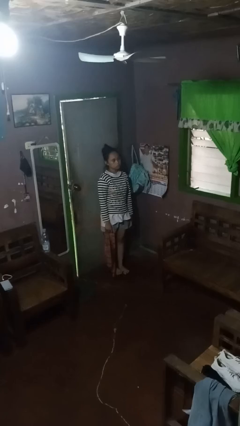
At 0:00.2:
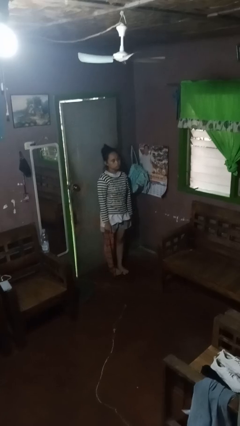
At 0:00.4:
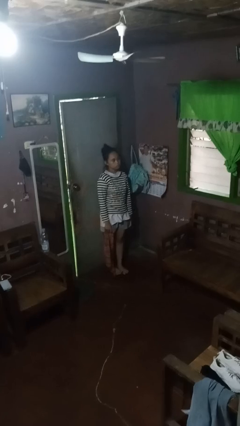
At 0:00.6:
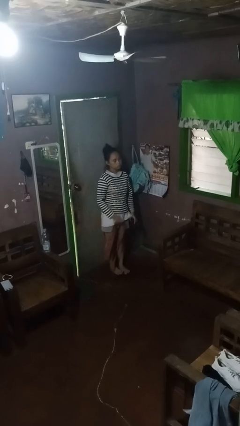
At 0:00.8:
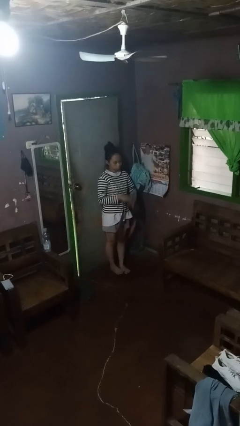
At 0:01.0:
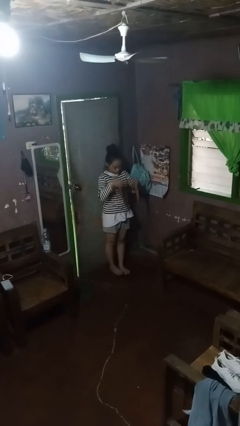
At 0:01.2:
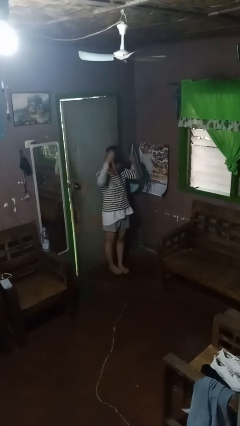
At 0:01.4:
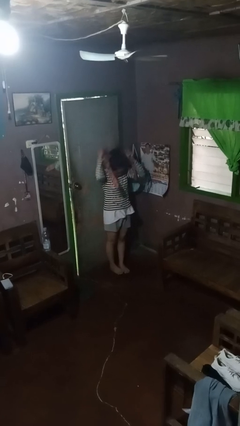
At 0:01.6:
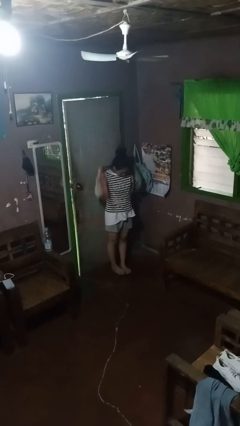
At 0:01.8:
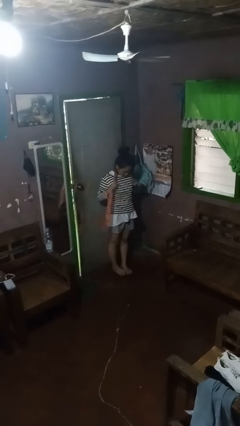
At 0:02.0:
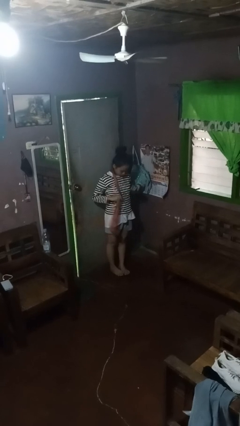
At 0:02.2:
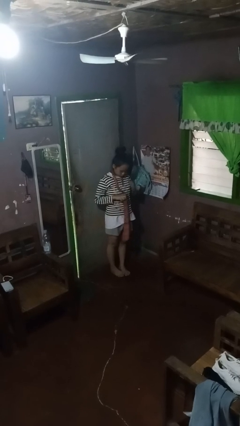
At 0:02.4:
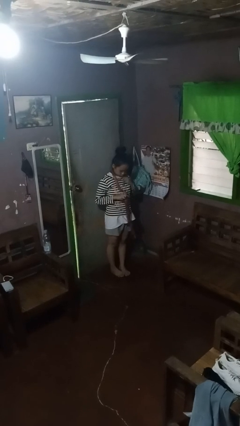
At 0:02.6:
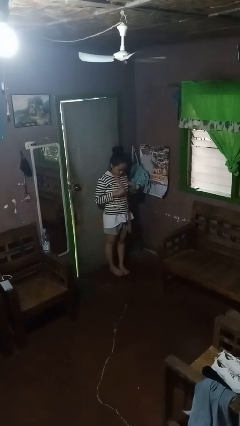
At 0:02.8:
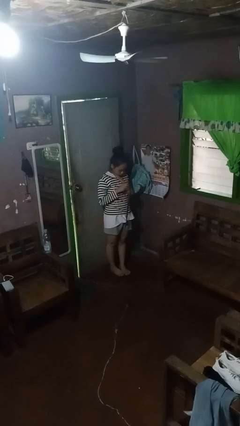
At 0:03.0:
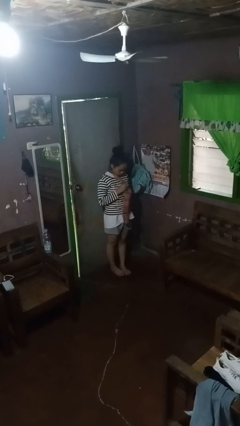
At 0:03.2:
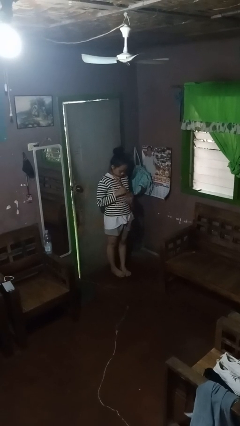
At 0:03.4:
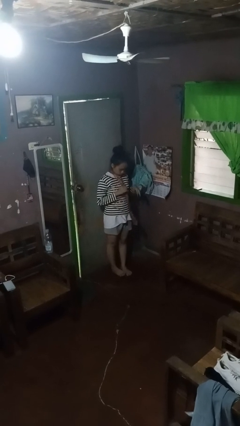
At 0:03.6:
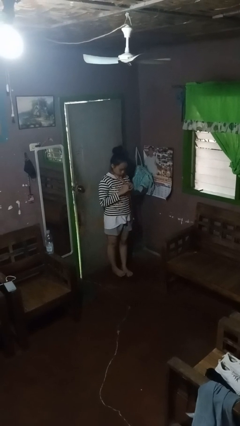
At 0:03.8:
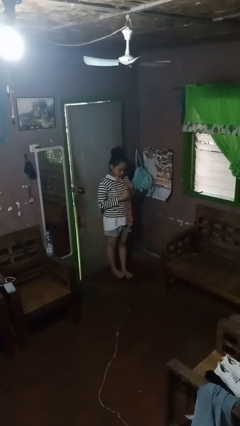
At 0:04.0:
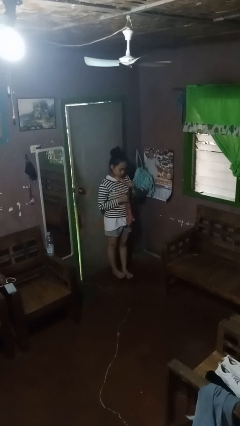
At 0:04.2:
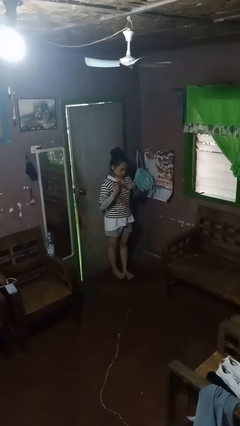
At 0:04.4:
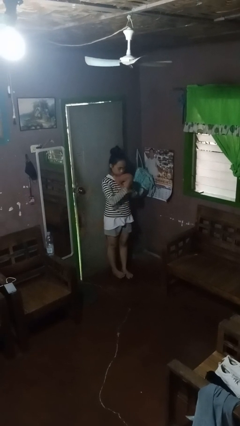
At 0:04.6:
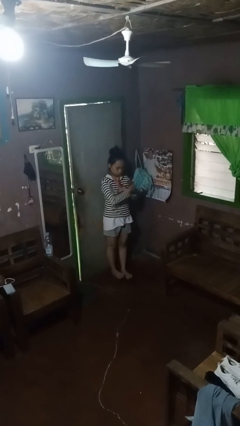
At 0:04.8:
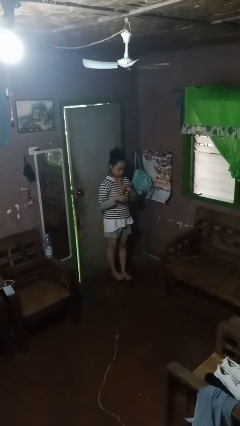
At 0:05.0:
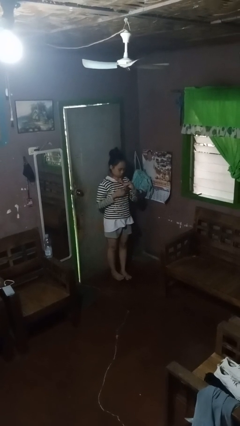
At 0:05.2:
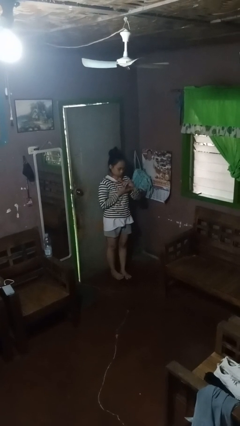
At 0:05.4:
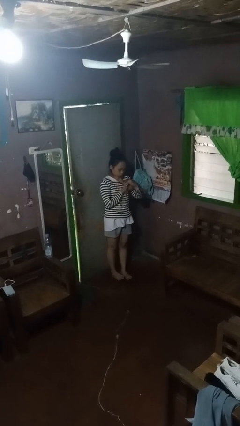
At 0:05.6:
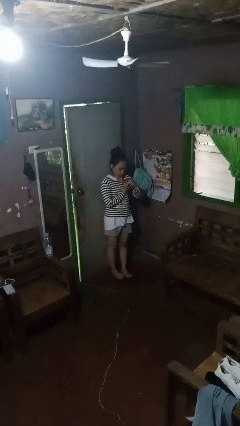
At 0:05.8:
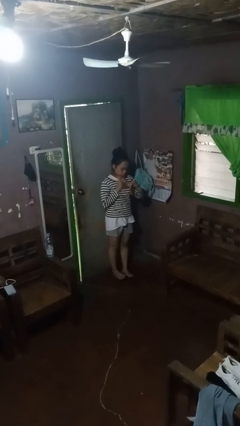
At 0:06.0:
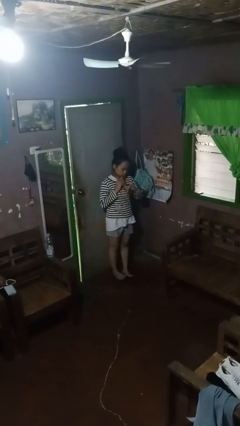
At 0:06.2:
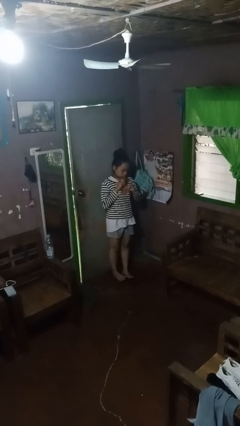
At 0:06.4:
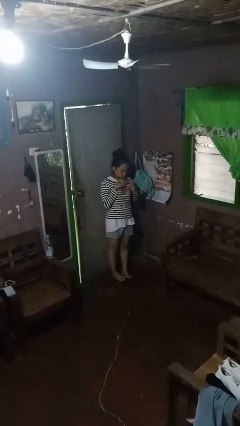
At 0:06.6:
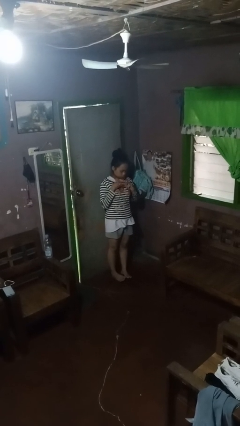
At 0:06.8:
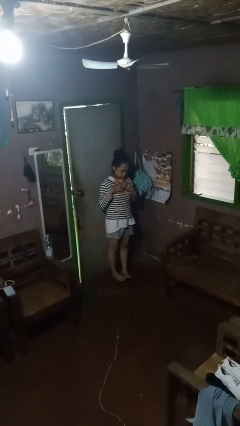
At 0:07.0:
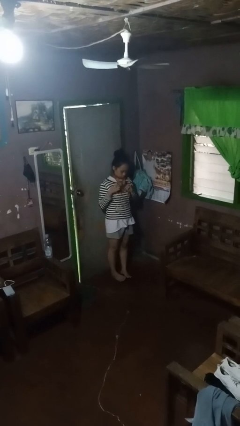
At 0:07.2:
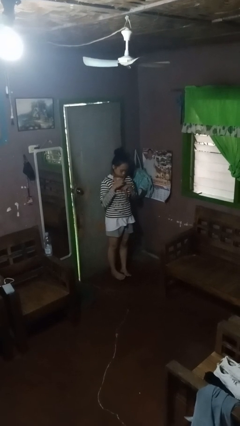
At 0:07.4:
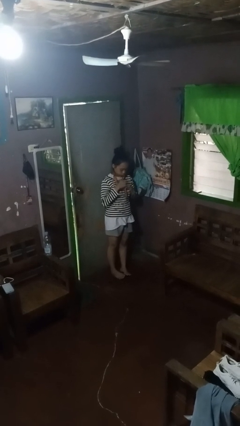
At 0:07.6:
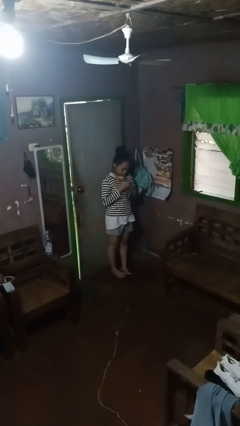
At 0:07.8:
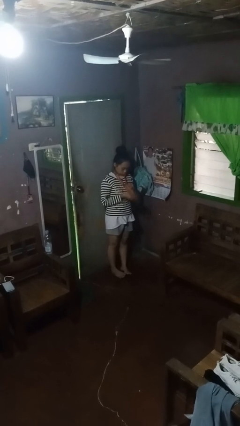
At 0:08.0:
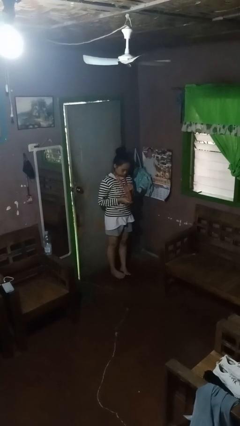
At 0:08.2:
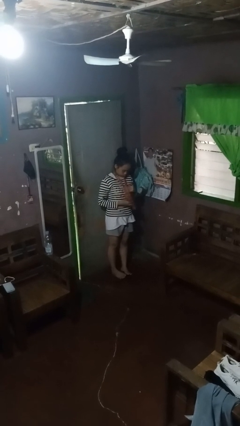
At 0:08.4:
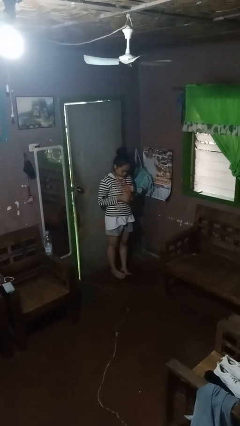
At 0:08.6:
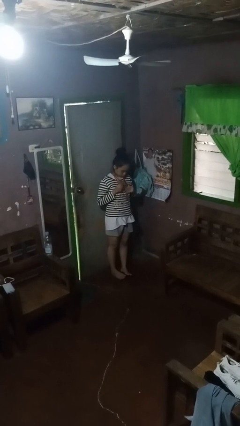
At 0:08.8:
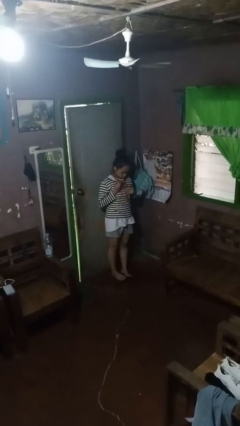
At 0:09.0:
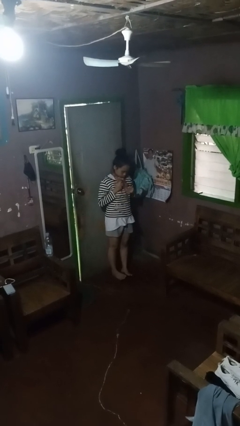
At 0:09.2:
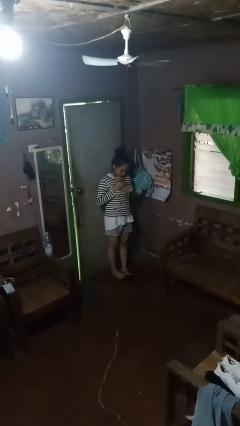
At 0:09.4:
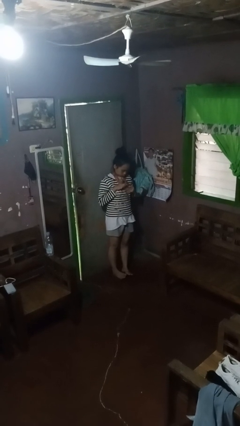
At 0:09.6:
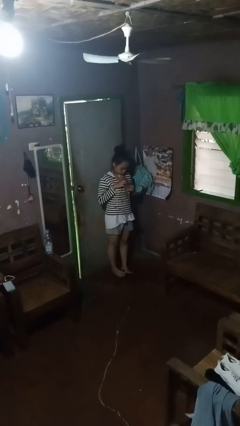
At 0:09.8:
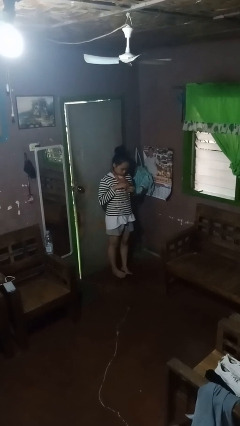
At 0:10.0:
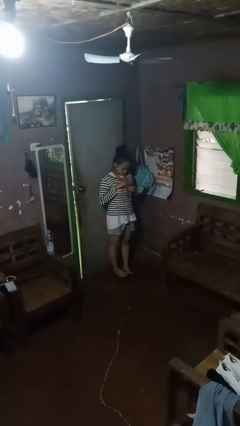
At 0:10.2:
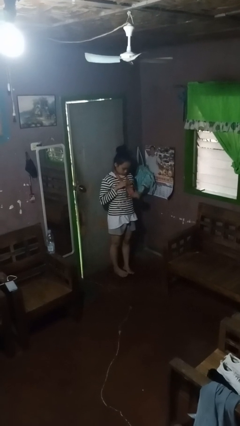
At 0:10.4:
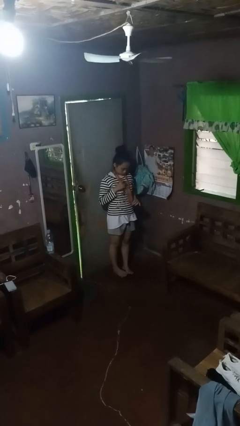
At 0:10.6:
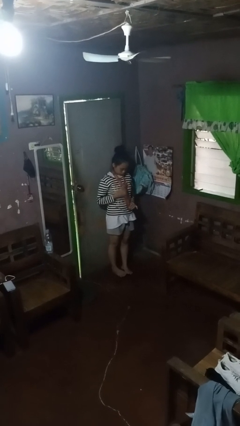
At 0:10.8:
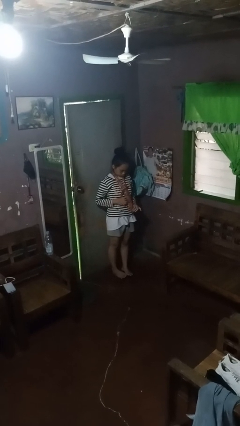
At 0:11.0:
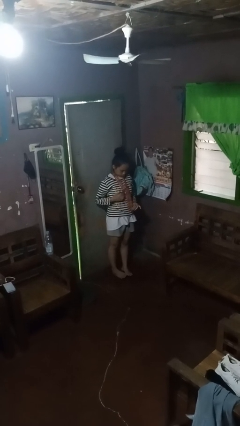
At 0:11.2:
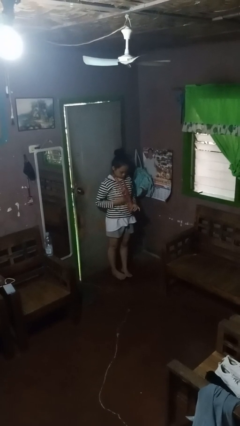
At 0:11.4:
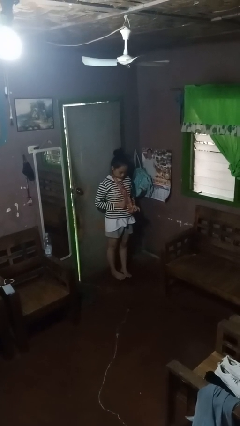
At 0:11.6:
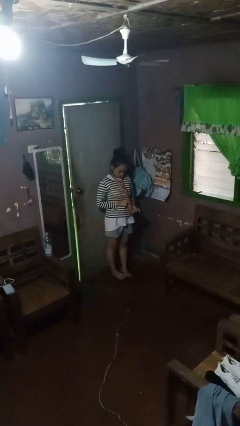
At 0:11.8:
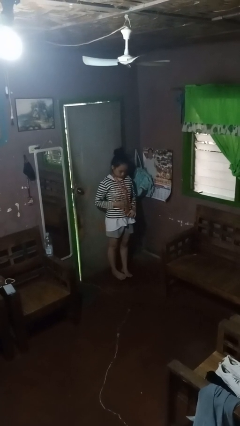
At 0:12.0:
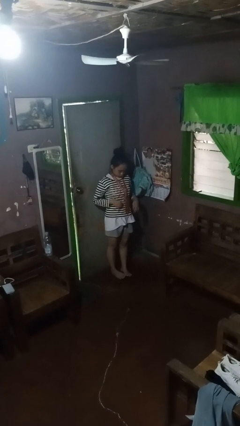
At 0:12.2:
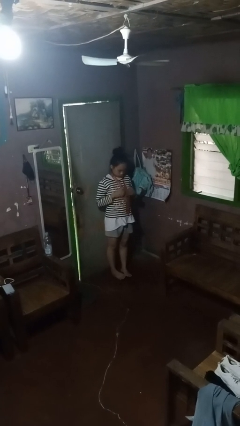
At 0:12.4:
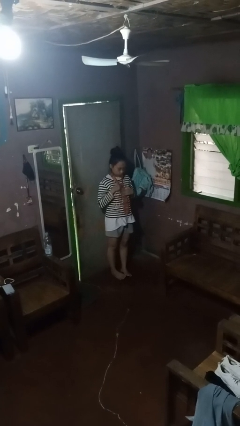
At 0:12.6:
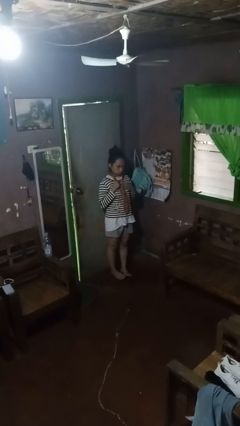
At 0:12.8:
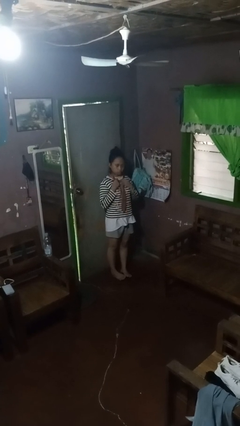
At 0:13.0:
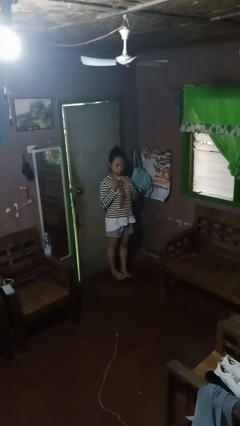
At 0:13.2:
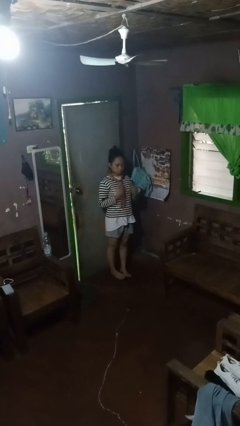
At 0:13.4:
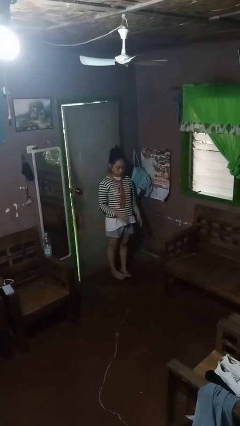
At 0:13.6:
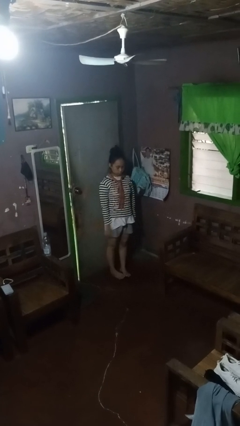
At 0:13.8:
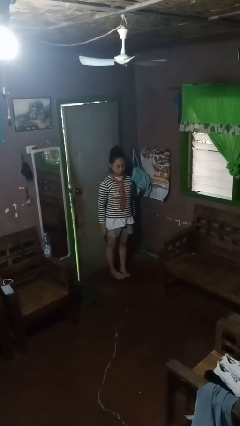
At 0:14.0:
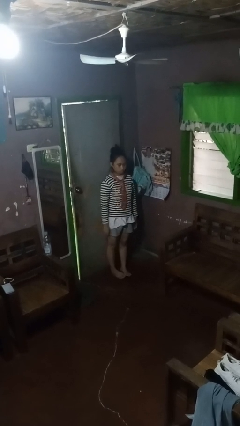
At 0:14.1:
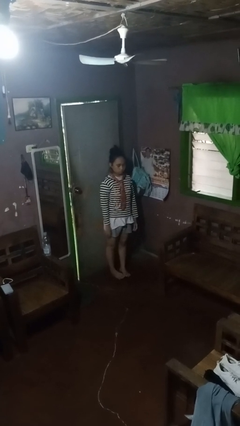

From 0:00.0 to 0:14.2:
person puts on necktie

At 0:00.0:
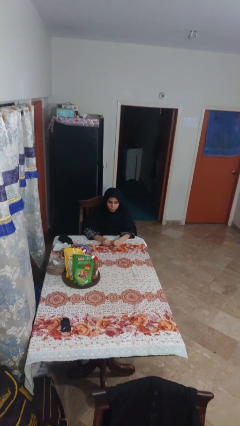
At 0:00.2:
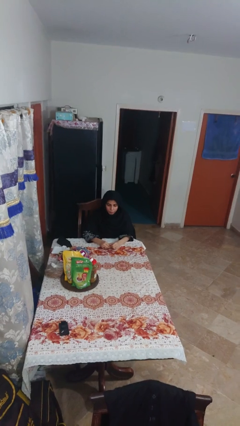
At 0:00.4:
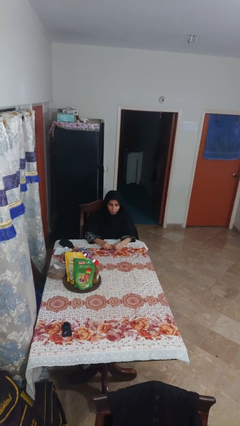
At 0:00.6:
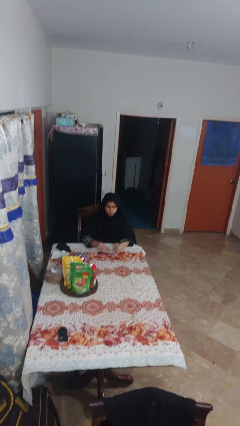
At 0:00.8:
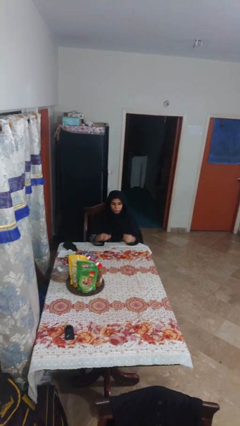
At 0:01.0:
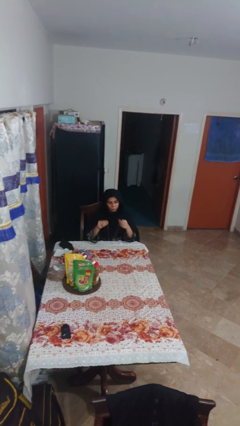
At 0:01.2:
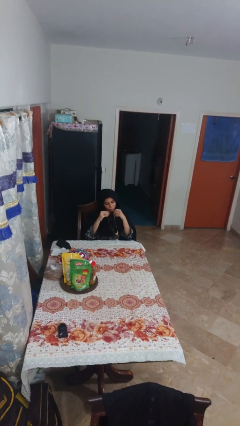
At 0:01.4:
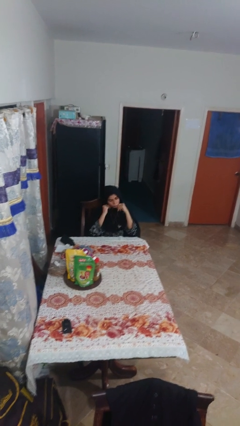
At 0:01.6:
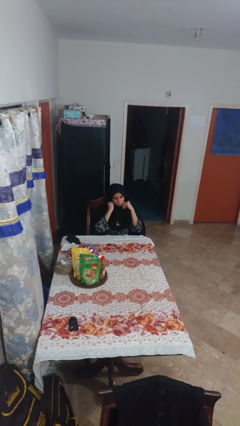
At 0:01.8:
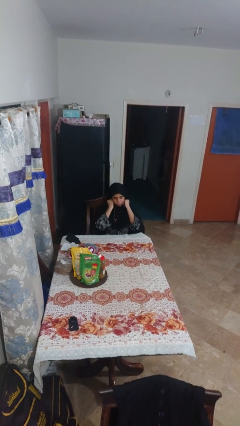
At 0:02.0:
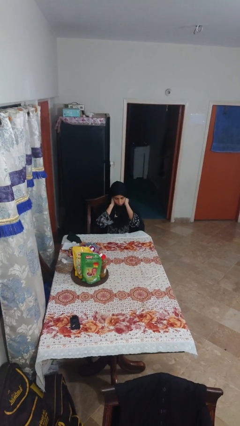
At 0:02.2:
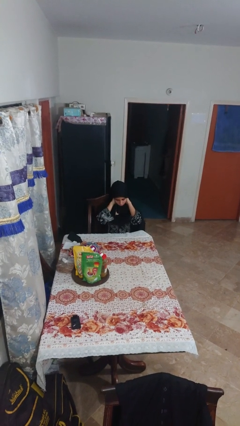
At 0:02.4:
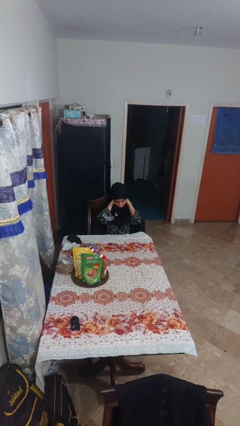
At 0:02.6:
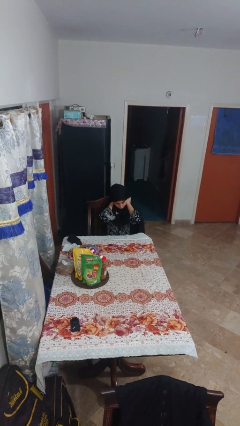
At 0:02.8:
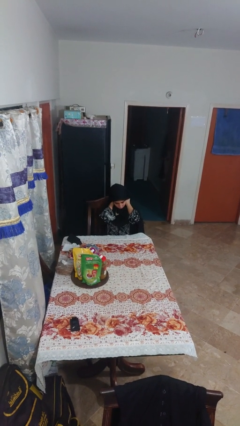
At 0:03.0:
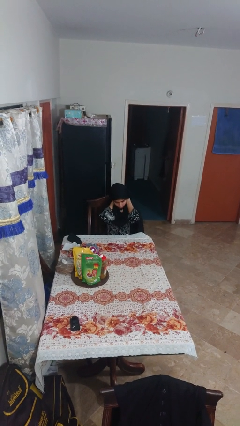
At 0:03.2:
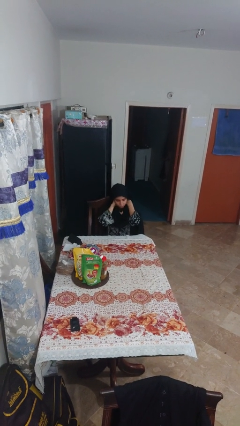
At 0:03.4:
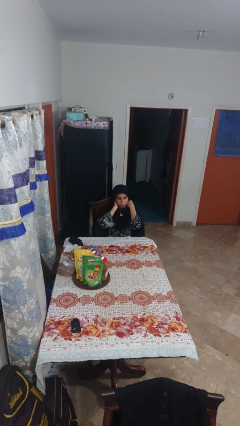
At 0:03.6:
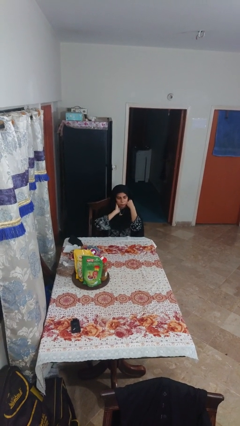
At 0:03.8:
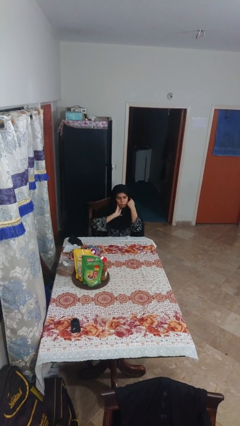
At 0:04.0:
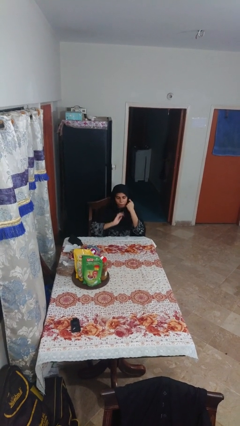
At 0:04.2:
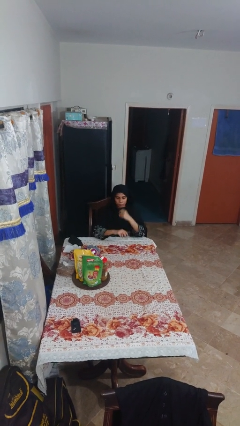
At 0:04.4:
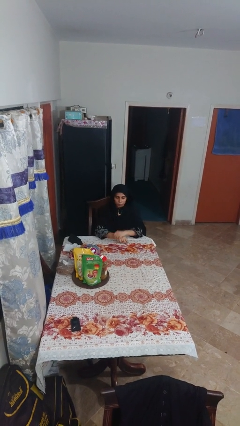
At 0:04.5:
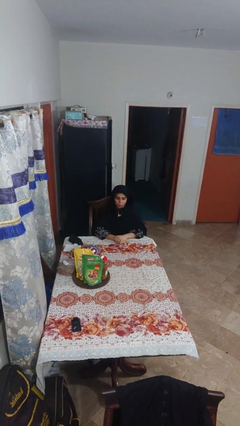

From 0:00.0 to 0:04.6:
person puts on necklace
